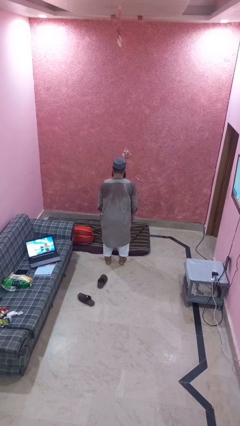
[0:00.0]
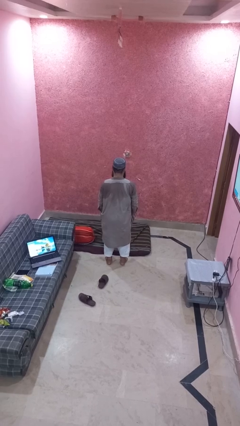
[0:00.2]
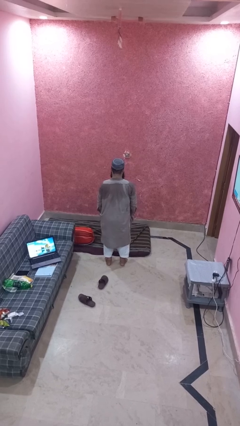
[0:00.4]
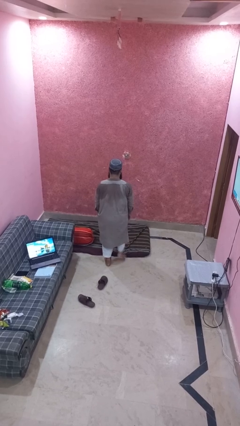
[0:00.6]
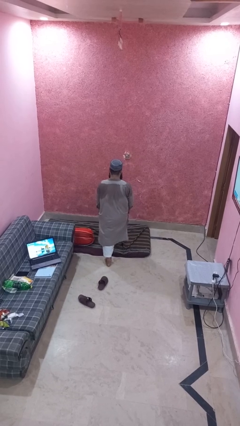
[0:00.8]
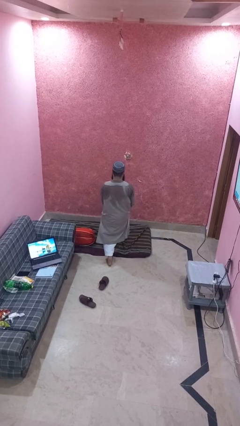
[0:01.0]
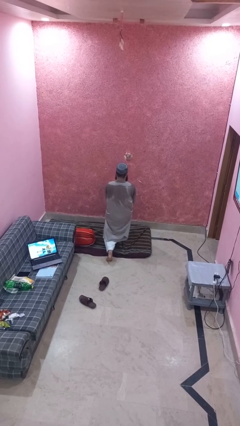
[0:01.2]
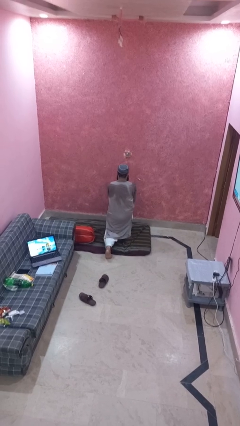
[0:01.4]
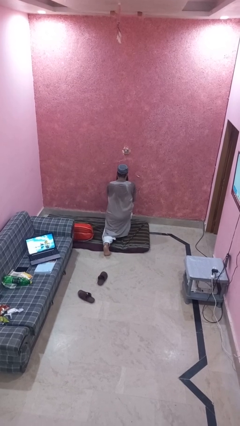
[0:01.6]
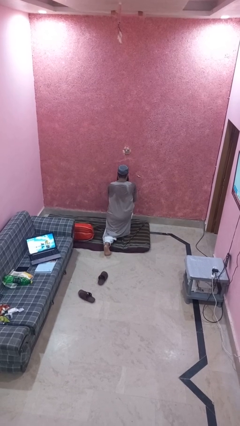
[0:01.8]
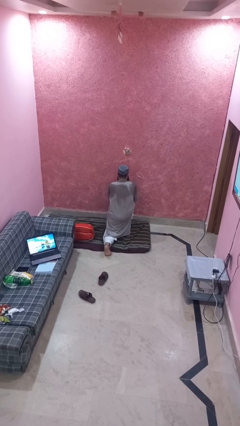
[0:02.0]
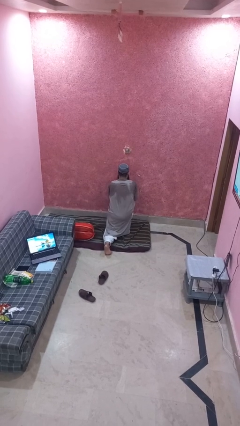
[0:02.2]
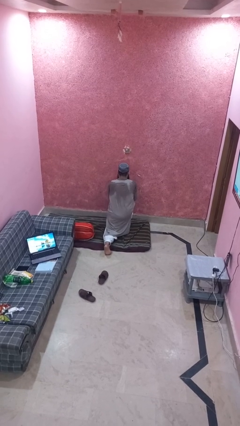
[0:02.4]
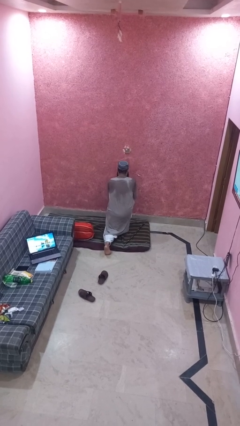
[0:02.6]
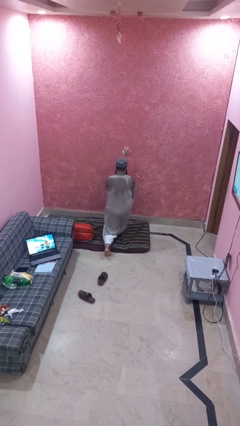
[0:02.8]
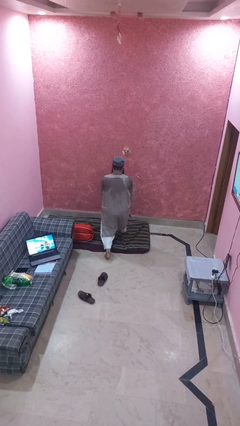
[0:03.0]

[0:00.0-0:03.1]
person exercises with lunges

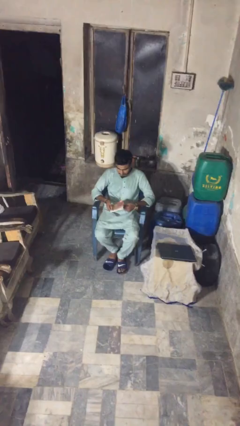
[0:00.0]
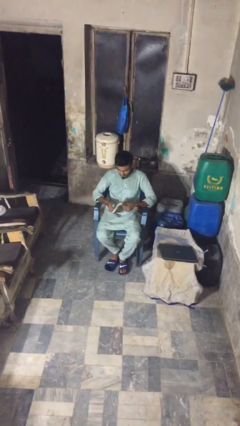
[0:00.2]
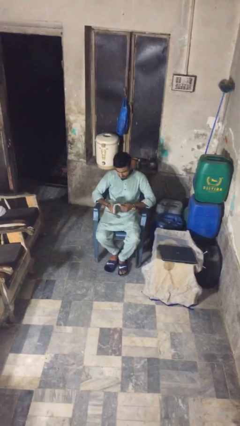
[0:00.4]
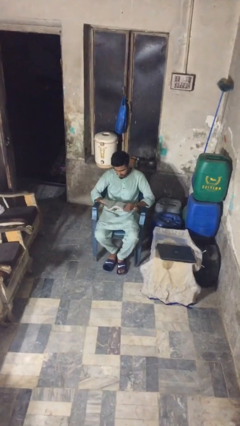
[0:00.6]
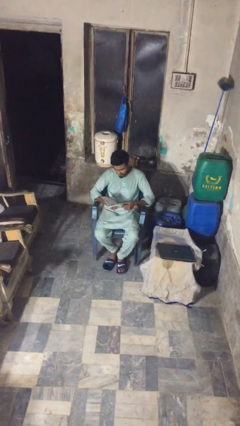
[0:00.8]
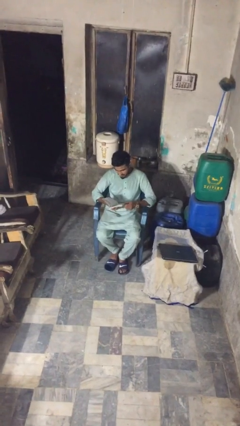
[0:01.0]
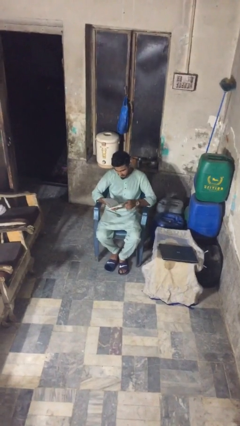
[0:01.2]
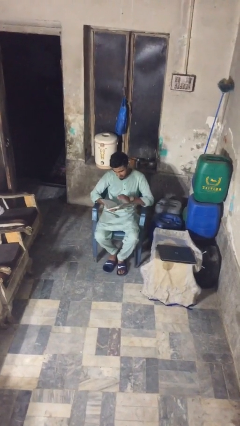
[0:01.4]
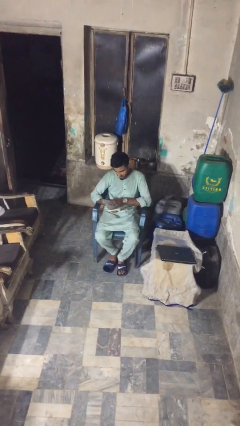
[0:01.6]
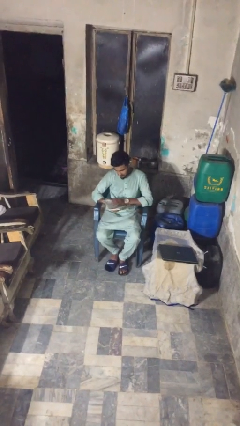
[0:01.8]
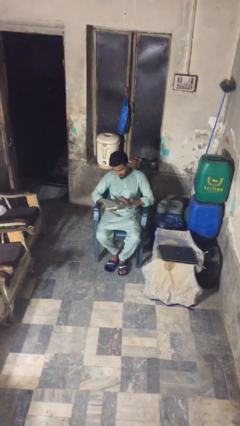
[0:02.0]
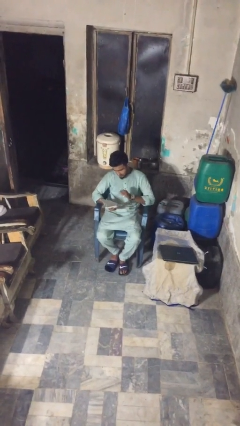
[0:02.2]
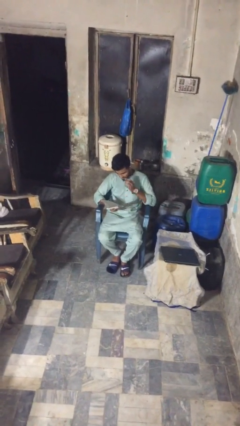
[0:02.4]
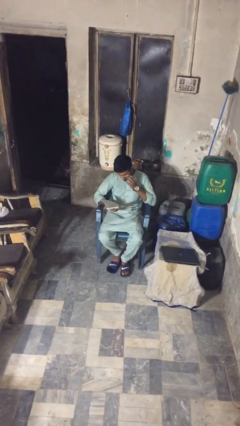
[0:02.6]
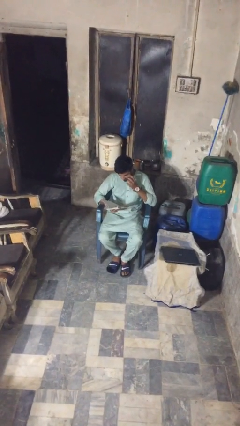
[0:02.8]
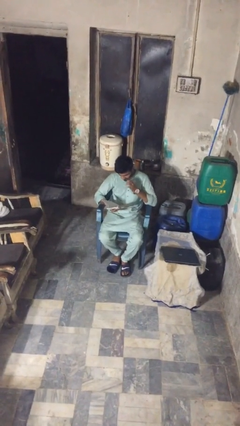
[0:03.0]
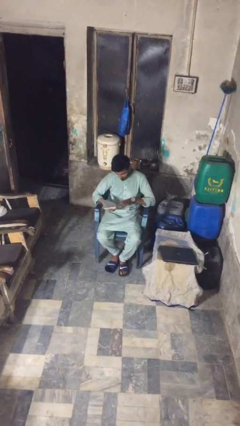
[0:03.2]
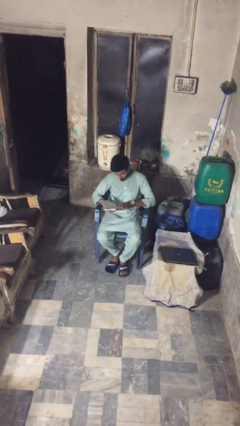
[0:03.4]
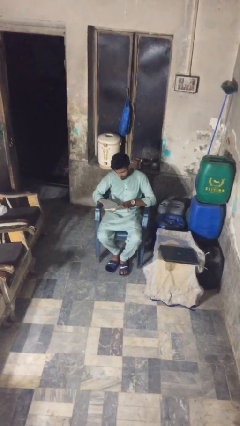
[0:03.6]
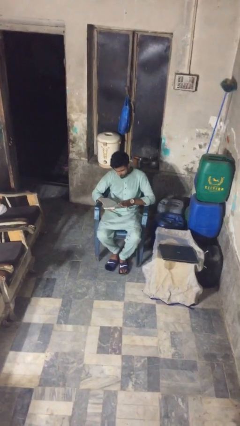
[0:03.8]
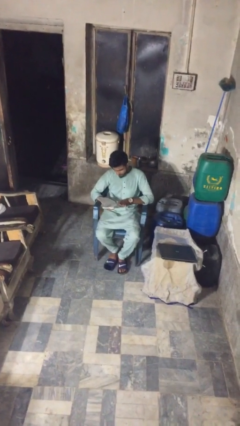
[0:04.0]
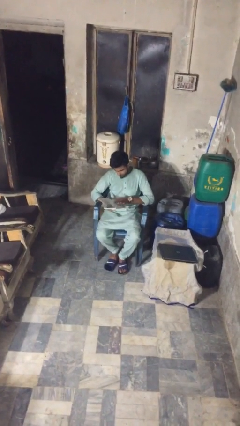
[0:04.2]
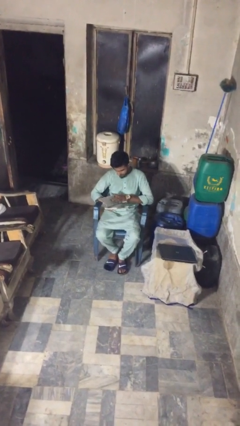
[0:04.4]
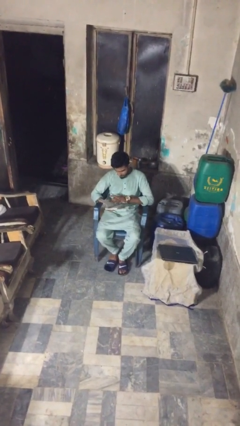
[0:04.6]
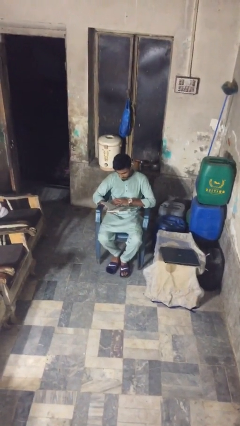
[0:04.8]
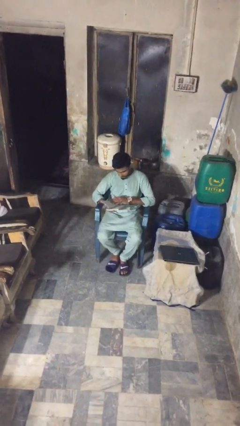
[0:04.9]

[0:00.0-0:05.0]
person reads document

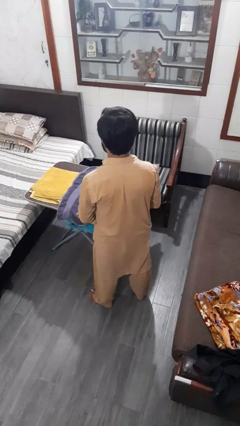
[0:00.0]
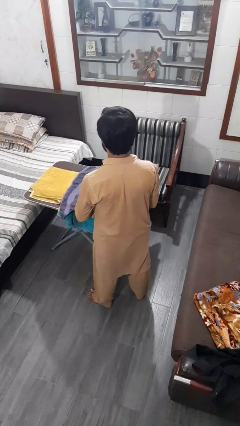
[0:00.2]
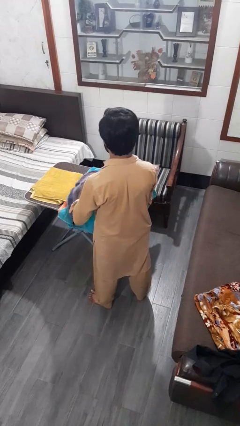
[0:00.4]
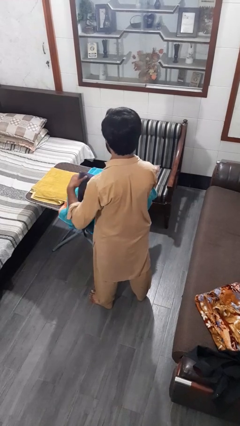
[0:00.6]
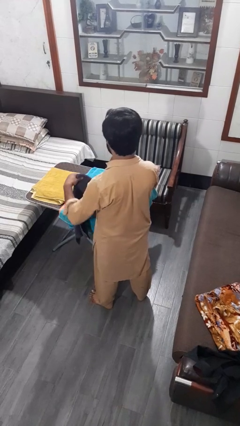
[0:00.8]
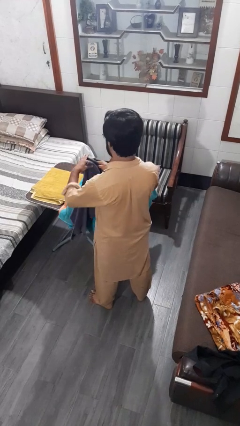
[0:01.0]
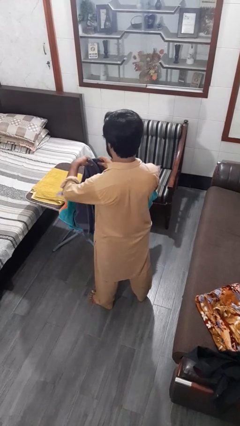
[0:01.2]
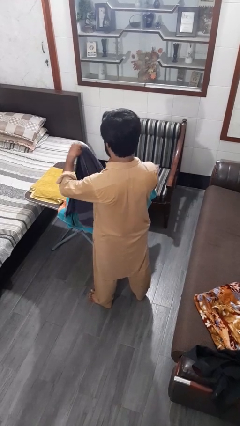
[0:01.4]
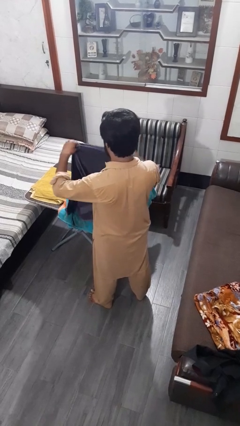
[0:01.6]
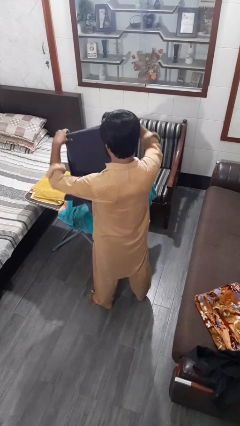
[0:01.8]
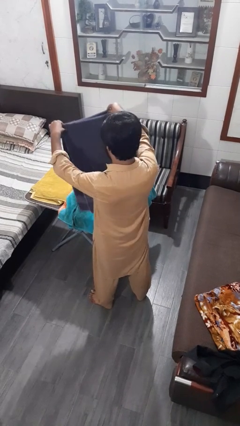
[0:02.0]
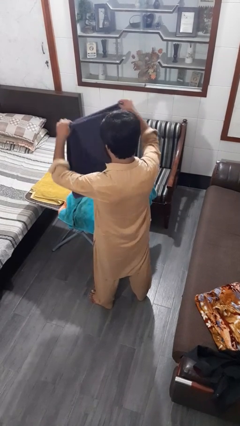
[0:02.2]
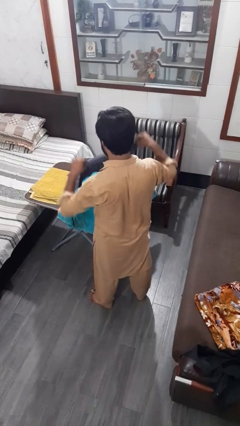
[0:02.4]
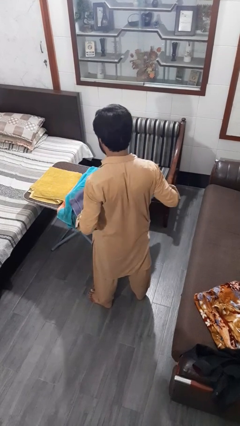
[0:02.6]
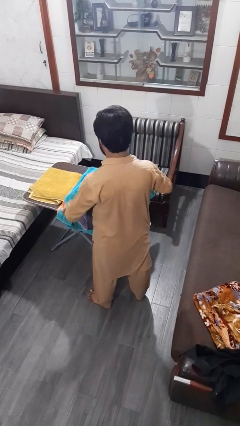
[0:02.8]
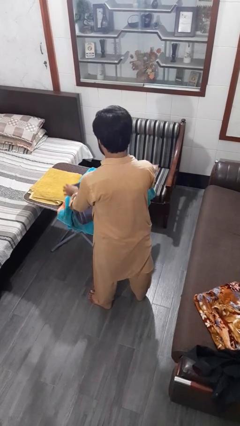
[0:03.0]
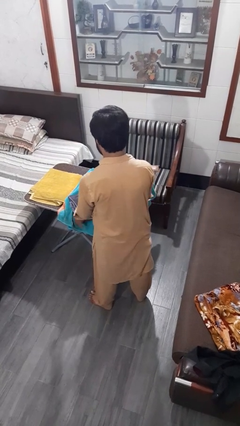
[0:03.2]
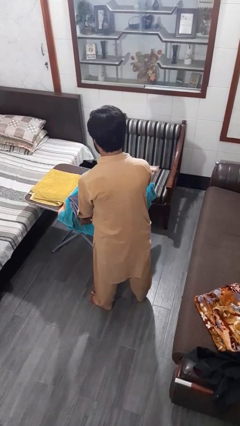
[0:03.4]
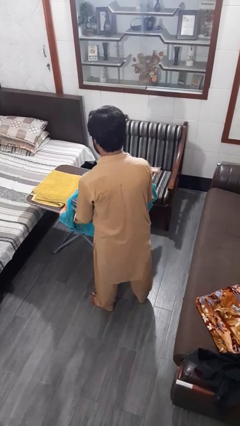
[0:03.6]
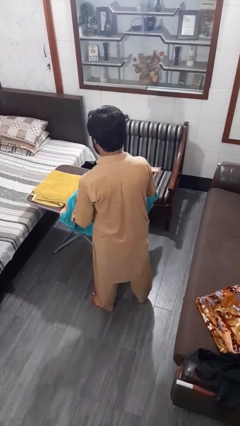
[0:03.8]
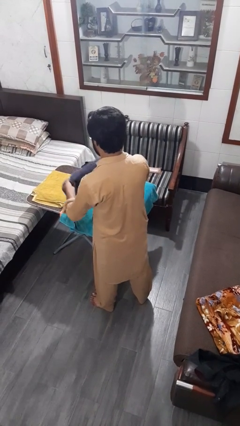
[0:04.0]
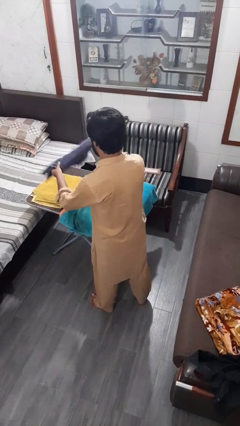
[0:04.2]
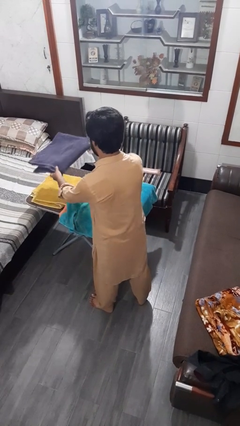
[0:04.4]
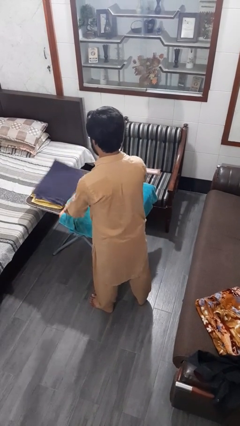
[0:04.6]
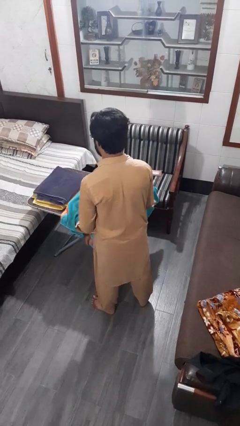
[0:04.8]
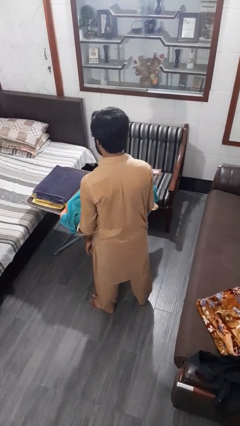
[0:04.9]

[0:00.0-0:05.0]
person folds towel

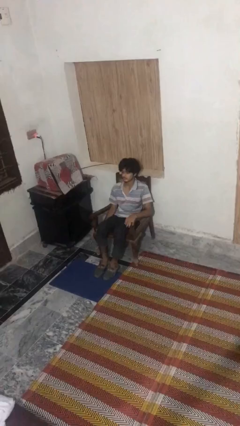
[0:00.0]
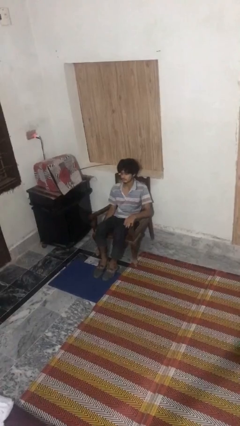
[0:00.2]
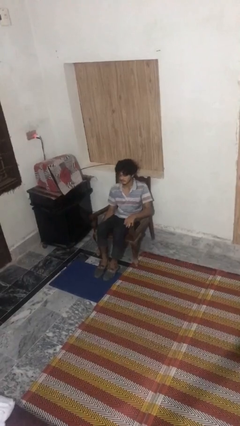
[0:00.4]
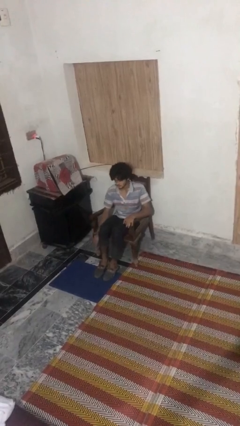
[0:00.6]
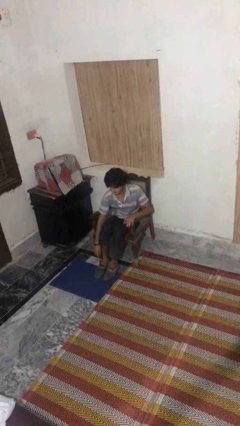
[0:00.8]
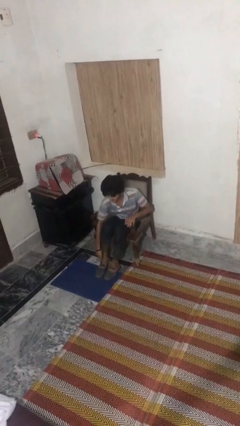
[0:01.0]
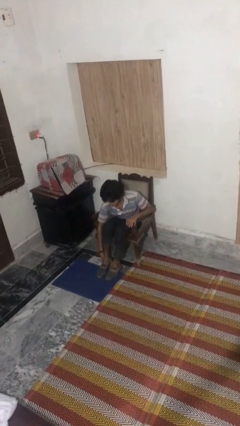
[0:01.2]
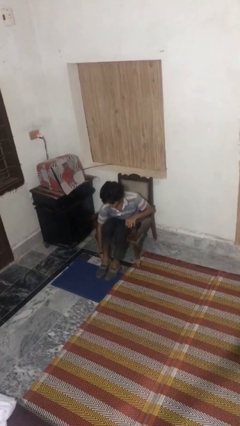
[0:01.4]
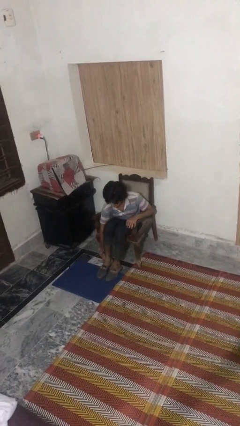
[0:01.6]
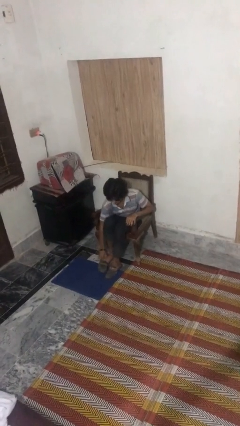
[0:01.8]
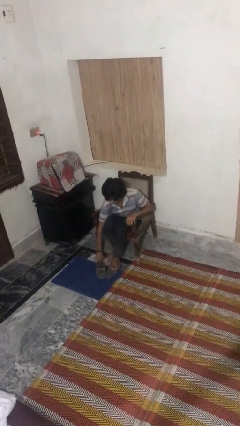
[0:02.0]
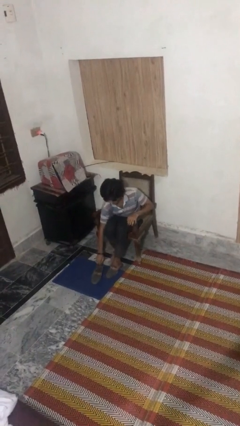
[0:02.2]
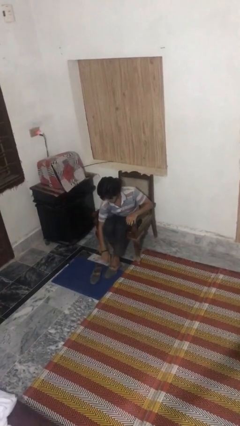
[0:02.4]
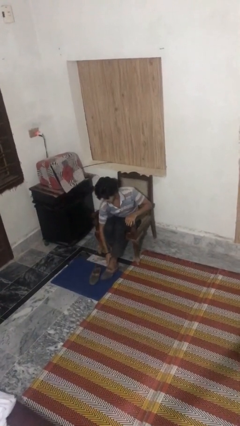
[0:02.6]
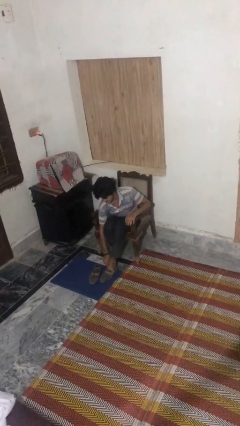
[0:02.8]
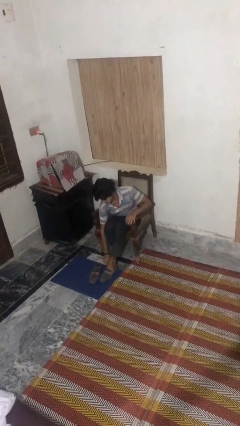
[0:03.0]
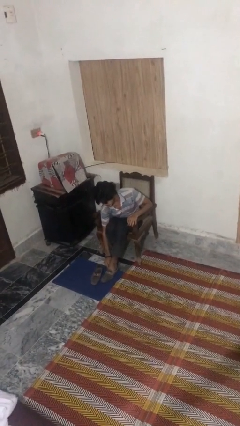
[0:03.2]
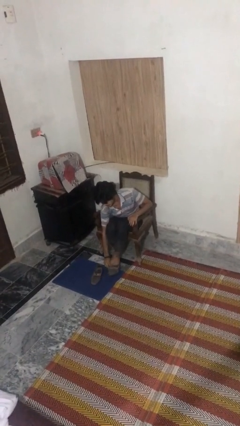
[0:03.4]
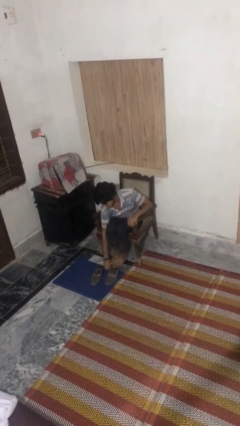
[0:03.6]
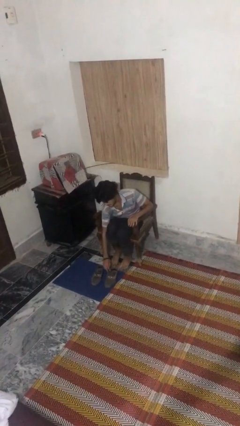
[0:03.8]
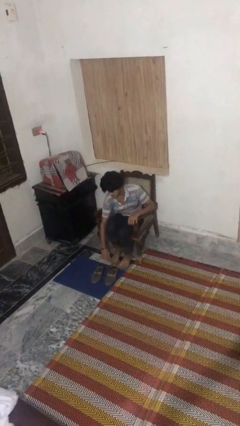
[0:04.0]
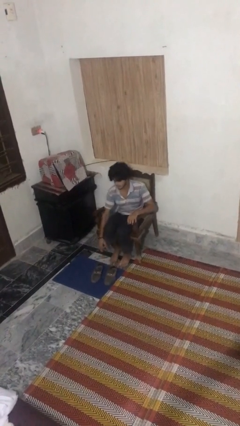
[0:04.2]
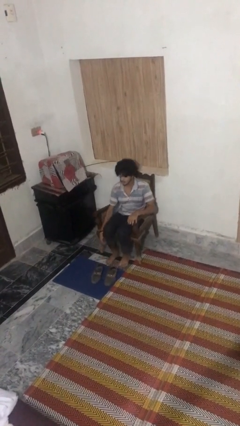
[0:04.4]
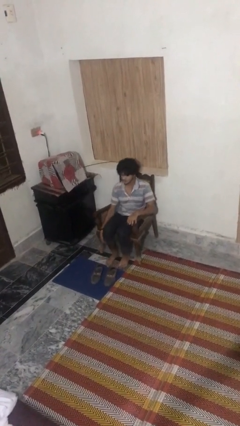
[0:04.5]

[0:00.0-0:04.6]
person takes off shoes

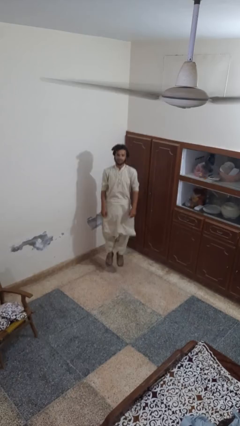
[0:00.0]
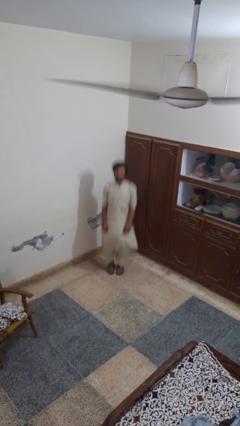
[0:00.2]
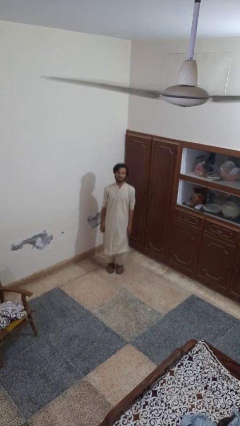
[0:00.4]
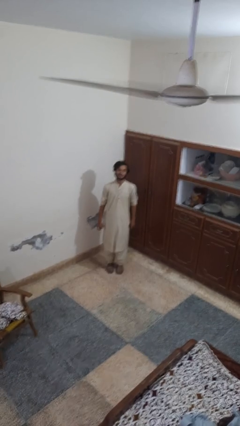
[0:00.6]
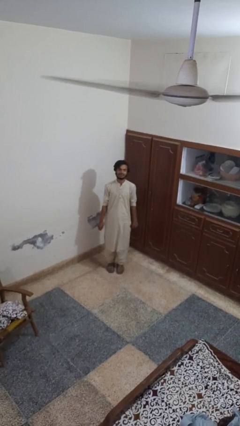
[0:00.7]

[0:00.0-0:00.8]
person jumps
